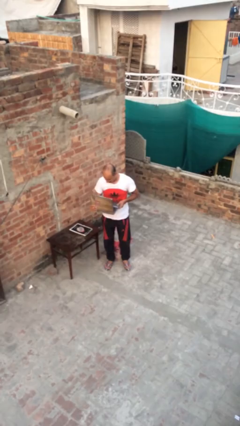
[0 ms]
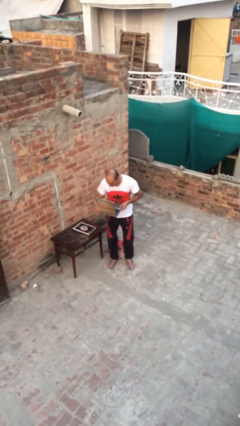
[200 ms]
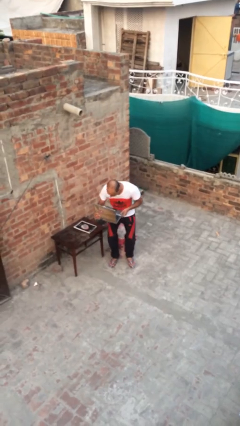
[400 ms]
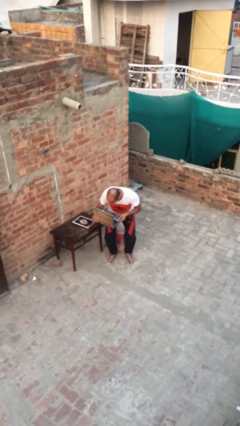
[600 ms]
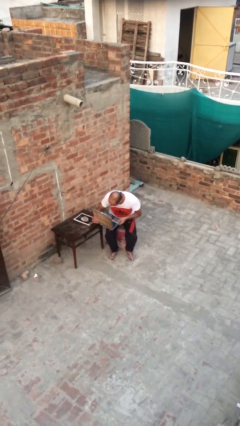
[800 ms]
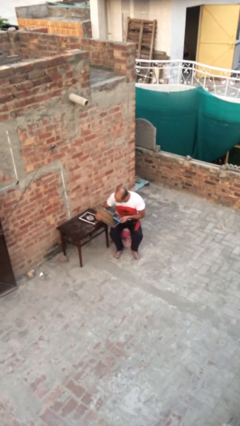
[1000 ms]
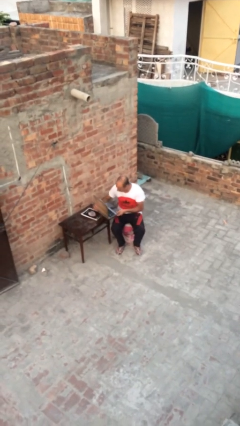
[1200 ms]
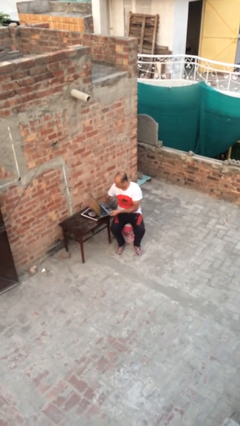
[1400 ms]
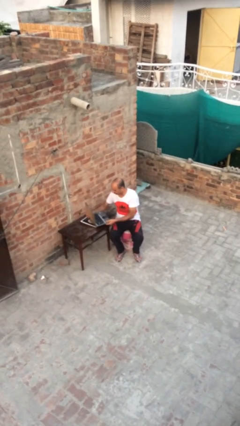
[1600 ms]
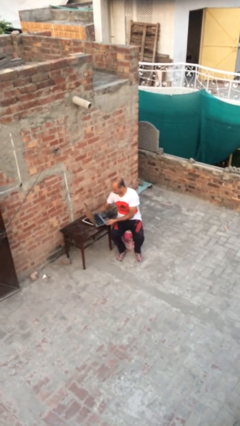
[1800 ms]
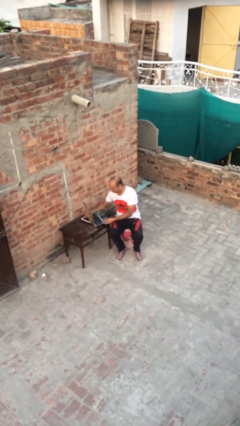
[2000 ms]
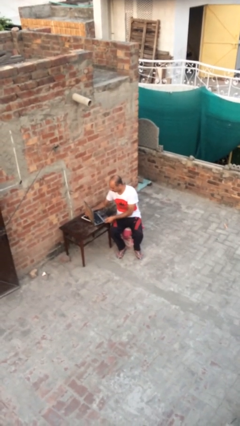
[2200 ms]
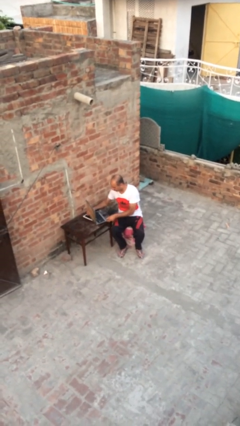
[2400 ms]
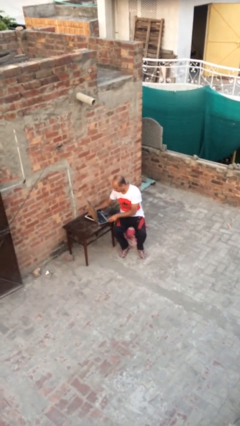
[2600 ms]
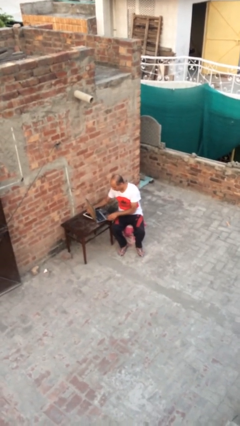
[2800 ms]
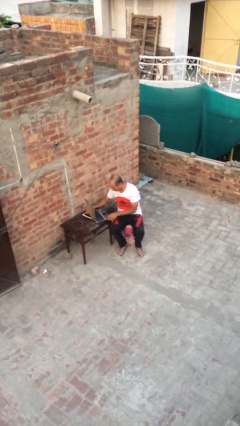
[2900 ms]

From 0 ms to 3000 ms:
person sits down

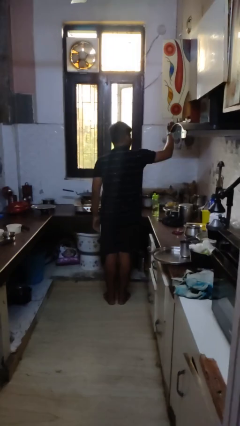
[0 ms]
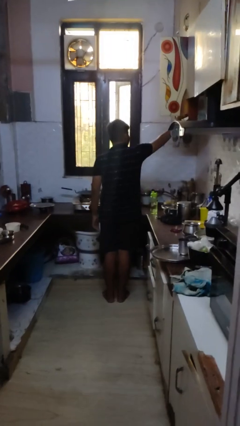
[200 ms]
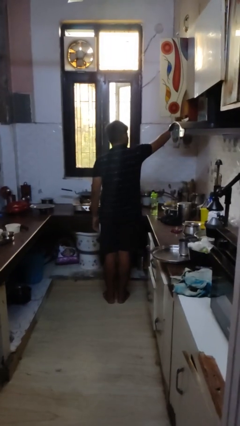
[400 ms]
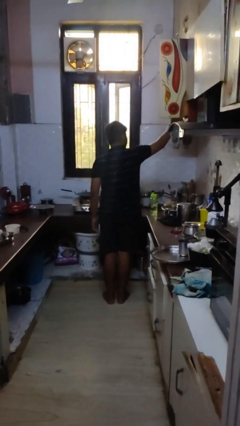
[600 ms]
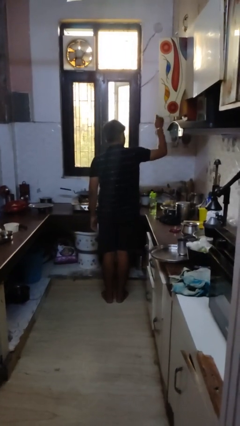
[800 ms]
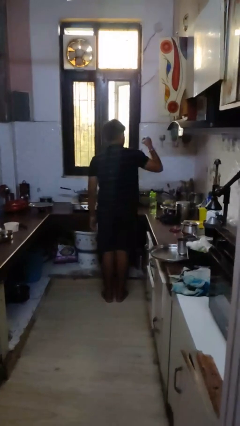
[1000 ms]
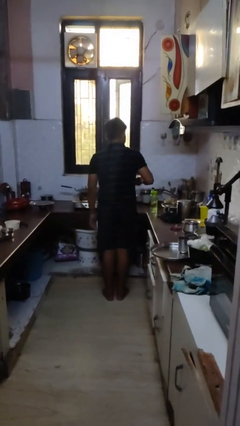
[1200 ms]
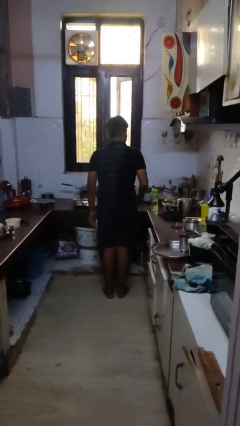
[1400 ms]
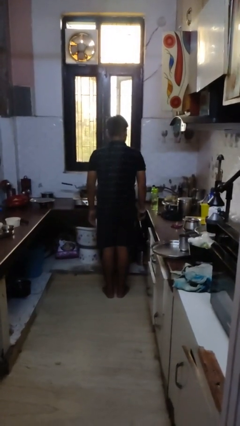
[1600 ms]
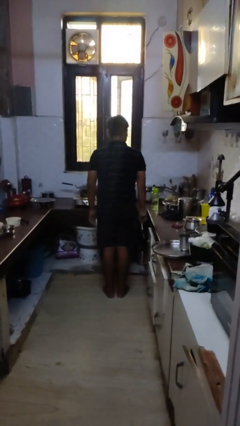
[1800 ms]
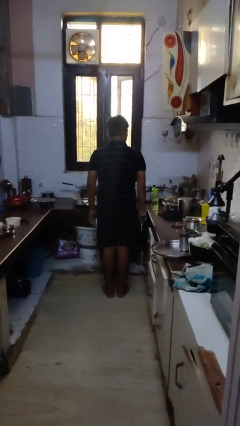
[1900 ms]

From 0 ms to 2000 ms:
person takes object from cabinet

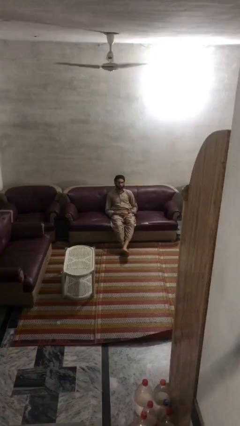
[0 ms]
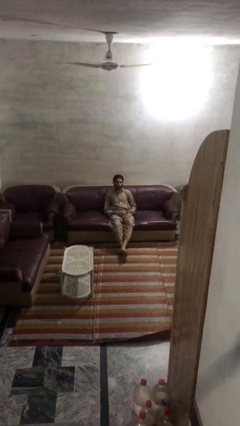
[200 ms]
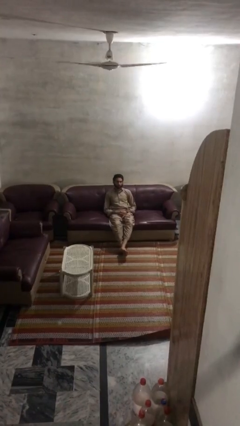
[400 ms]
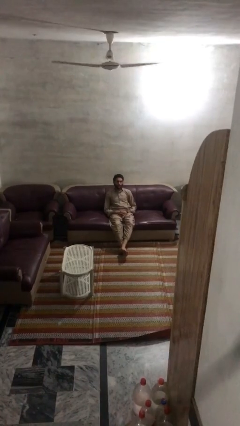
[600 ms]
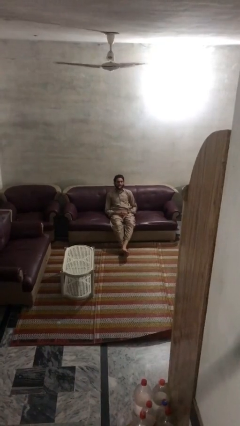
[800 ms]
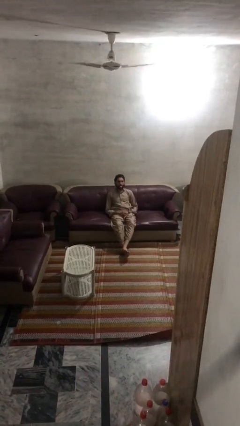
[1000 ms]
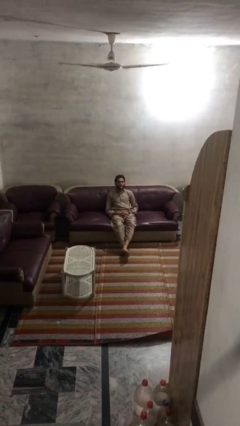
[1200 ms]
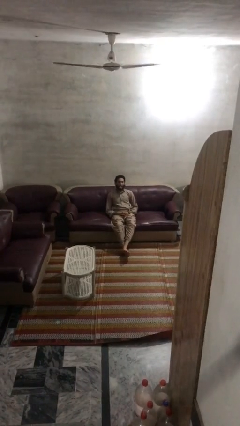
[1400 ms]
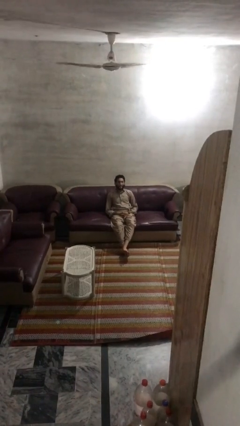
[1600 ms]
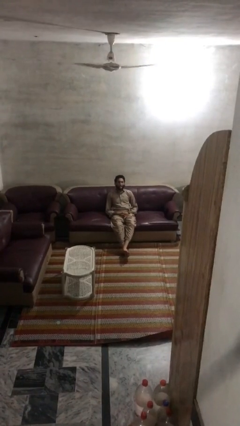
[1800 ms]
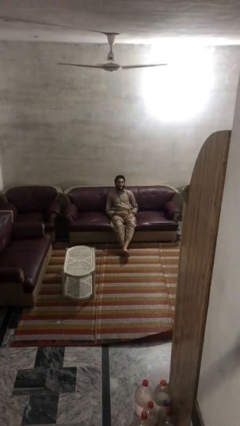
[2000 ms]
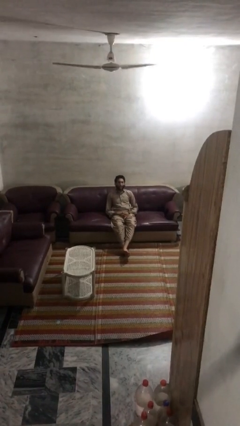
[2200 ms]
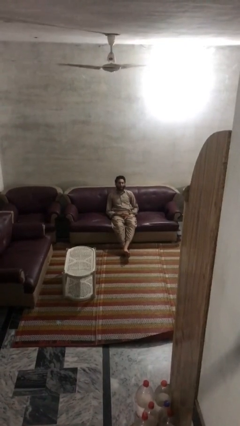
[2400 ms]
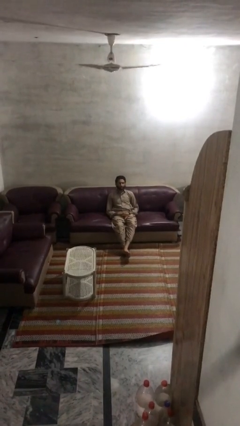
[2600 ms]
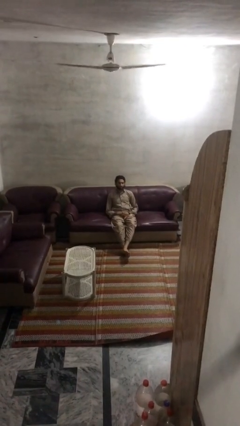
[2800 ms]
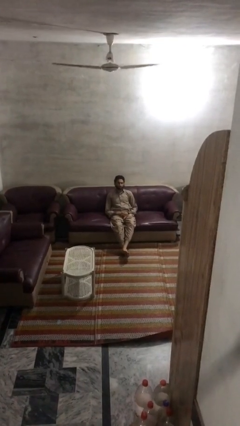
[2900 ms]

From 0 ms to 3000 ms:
person sticks out tongue

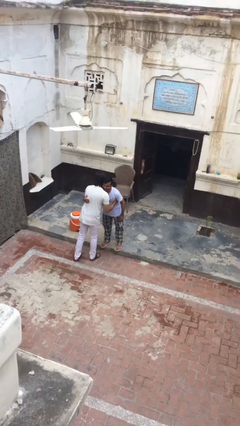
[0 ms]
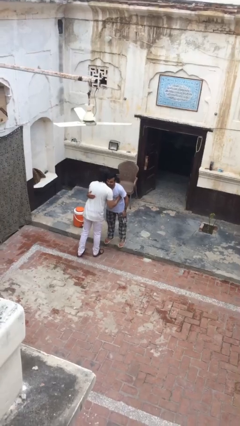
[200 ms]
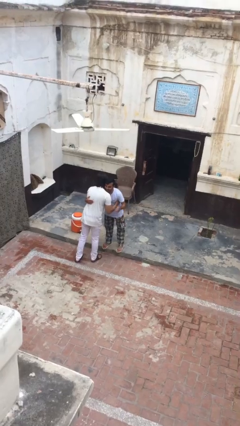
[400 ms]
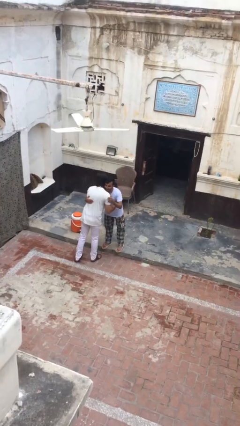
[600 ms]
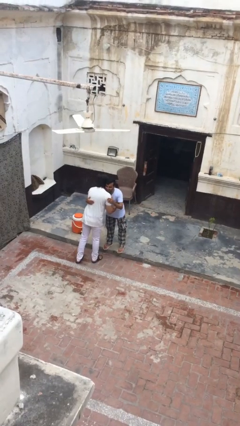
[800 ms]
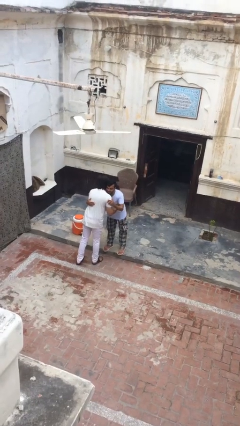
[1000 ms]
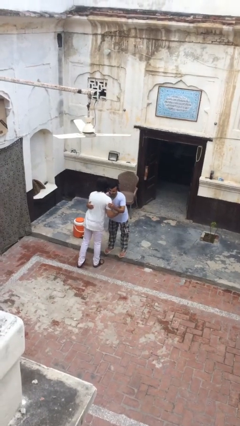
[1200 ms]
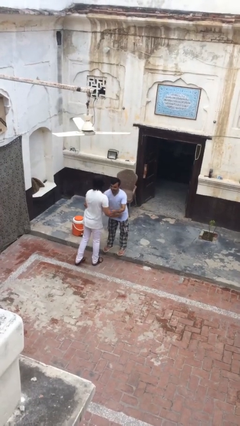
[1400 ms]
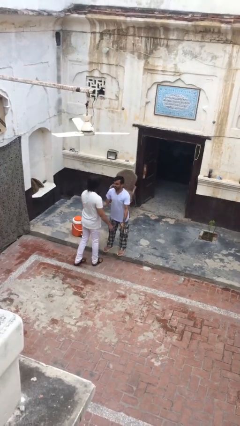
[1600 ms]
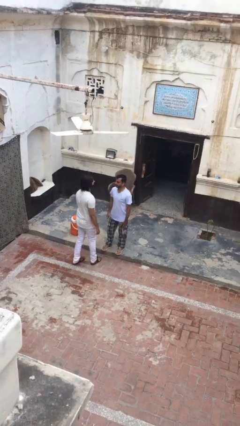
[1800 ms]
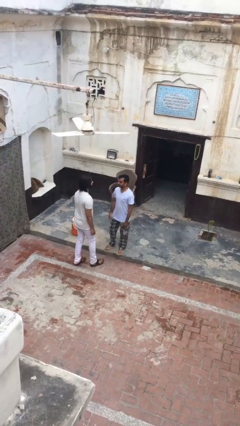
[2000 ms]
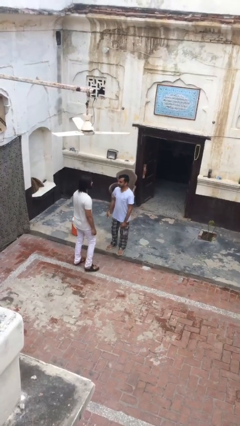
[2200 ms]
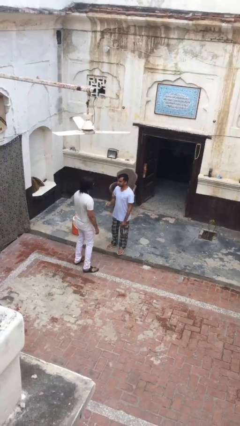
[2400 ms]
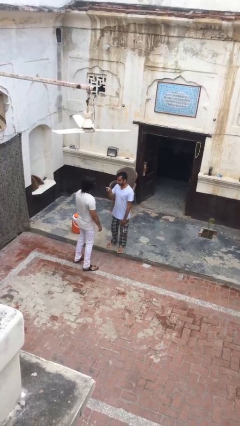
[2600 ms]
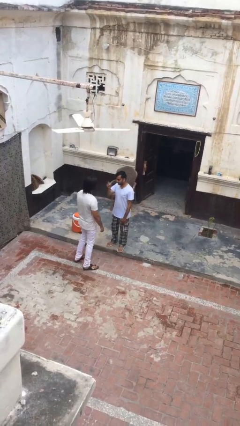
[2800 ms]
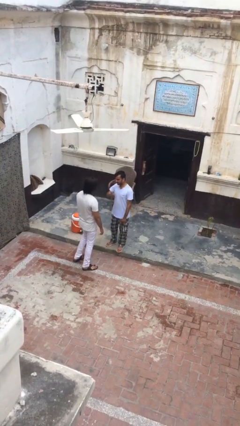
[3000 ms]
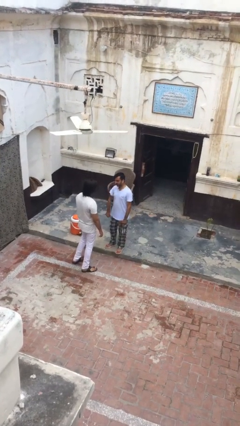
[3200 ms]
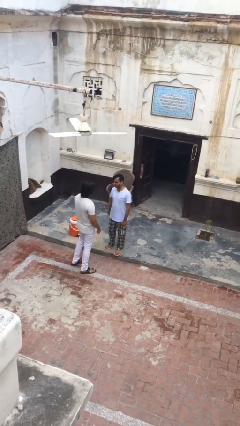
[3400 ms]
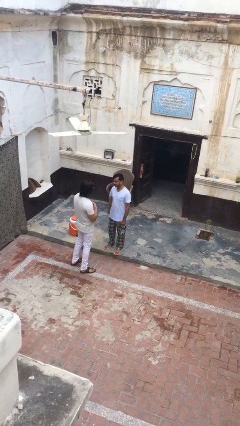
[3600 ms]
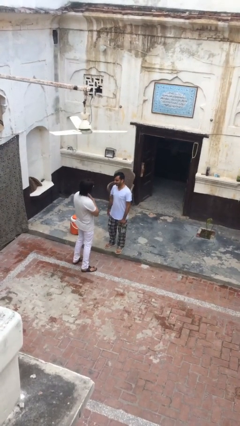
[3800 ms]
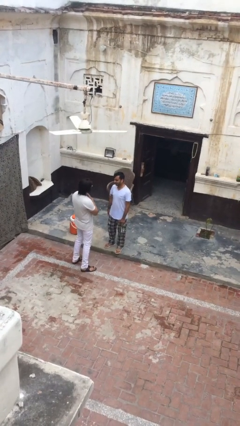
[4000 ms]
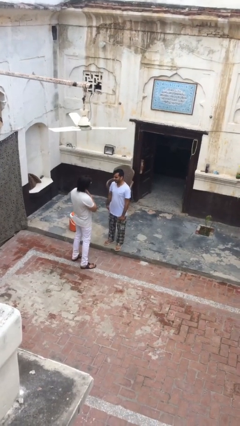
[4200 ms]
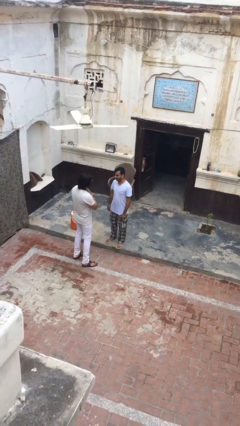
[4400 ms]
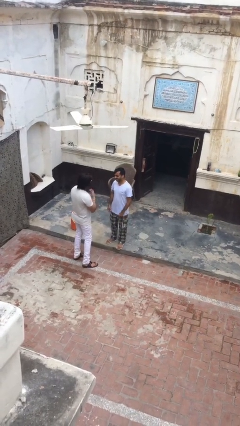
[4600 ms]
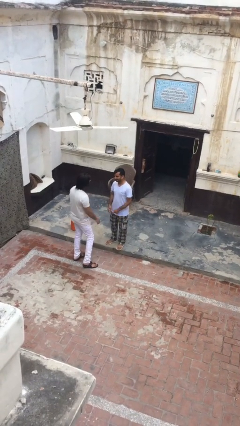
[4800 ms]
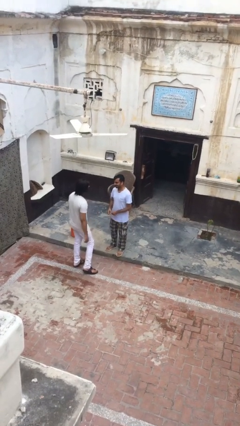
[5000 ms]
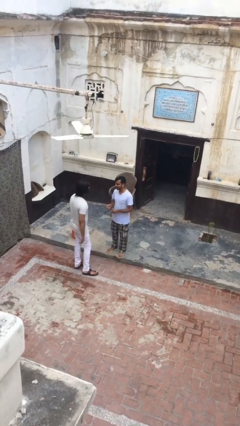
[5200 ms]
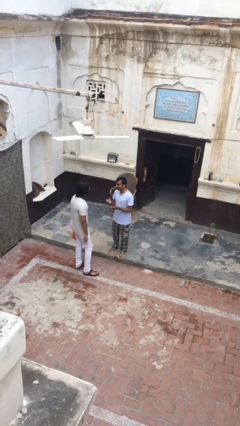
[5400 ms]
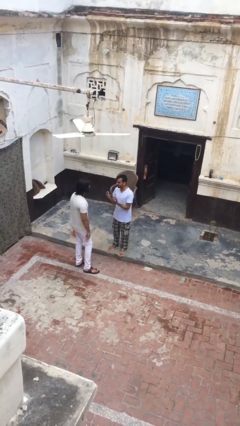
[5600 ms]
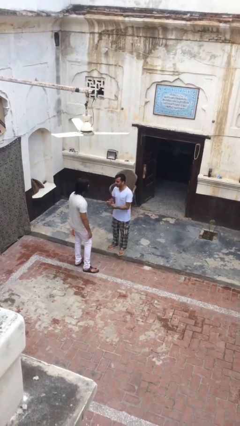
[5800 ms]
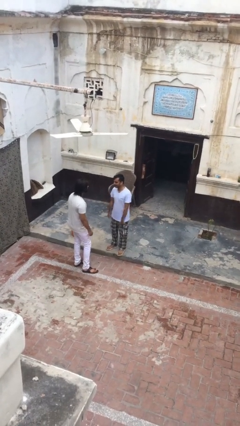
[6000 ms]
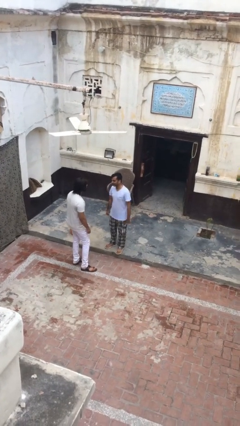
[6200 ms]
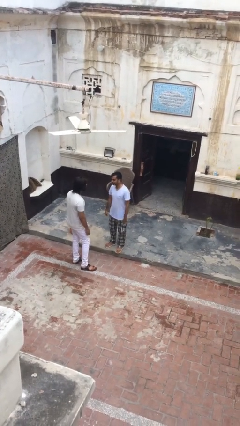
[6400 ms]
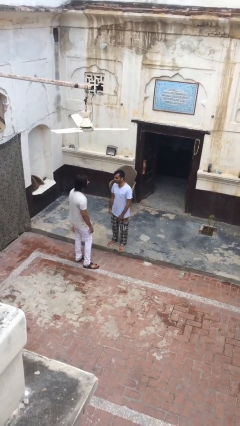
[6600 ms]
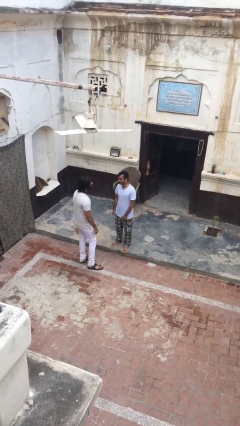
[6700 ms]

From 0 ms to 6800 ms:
person talks to person

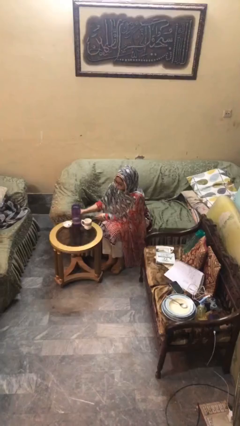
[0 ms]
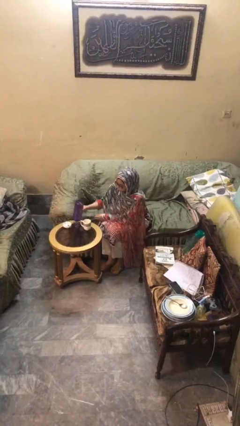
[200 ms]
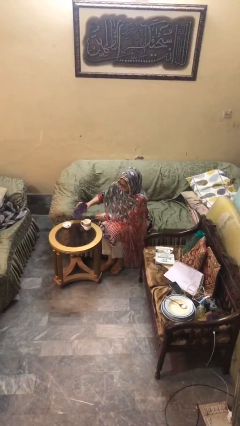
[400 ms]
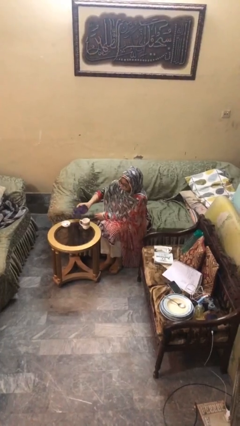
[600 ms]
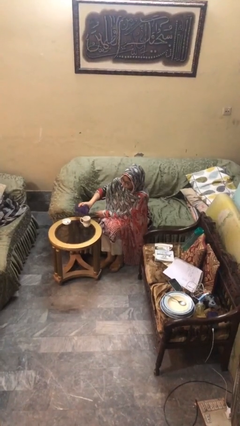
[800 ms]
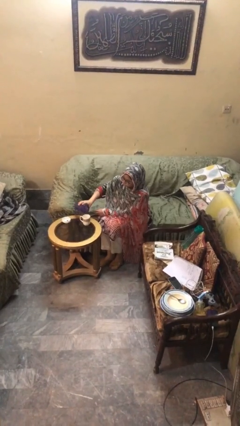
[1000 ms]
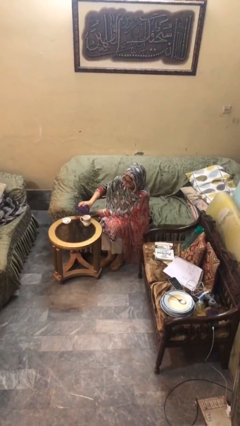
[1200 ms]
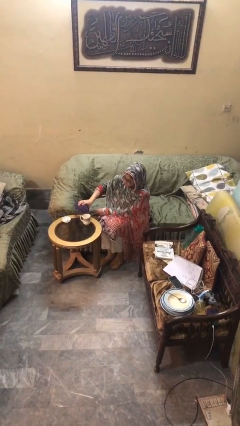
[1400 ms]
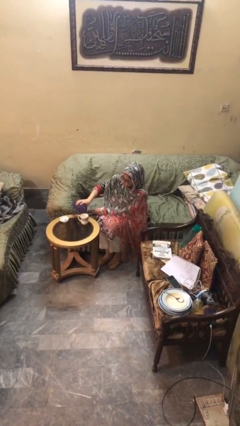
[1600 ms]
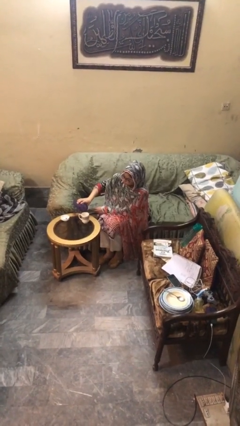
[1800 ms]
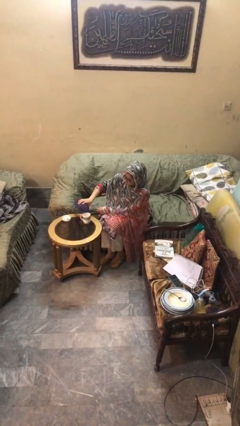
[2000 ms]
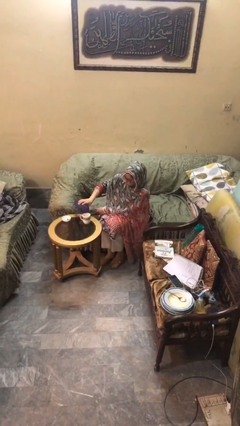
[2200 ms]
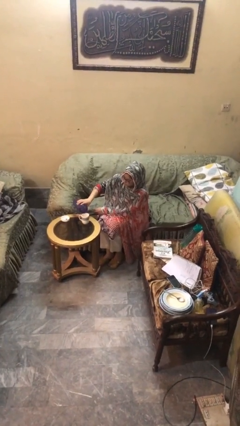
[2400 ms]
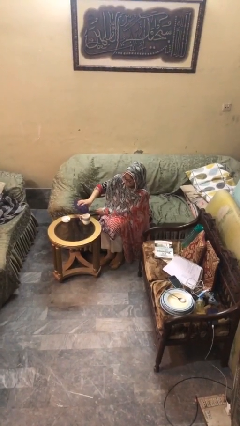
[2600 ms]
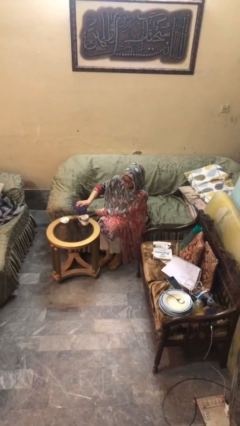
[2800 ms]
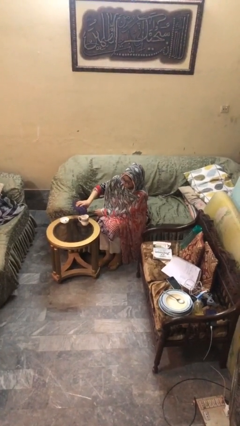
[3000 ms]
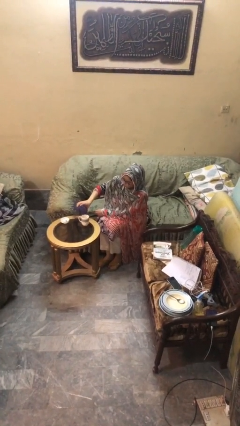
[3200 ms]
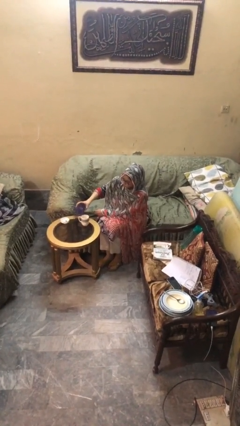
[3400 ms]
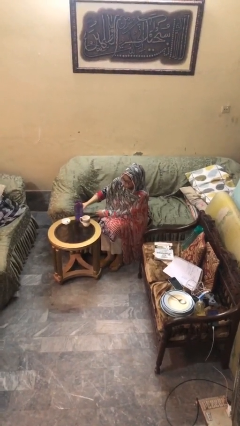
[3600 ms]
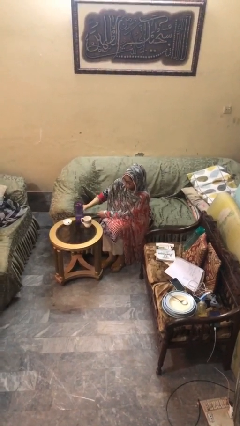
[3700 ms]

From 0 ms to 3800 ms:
person pours liquid into cup
